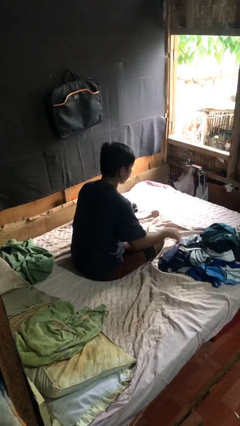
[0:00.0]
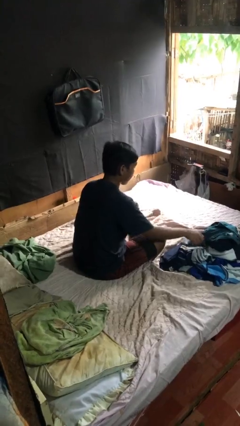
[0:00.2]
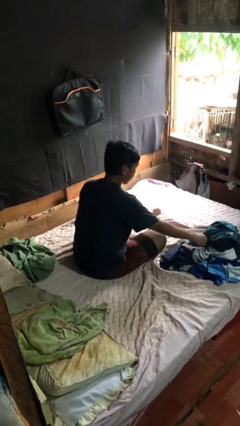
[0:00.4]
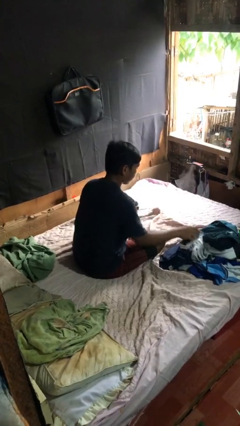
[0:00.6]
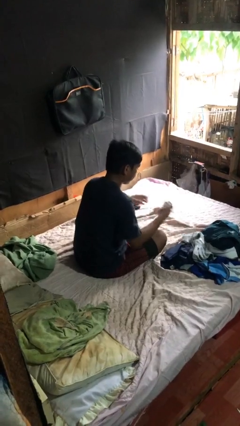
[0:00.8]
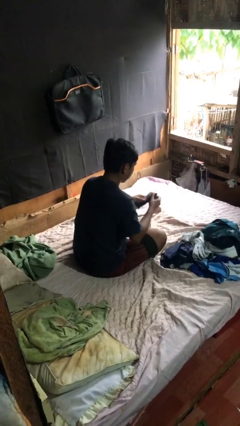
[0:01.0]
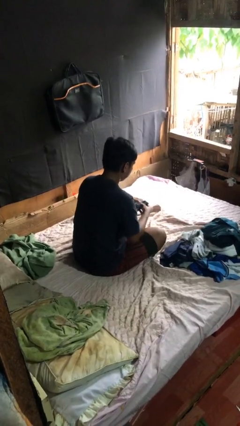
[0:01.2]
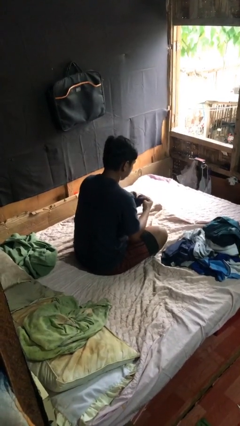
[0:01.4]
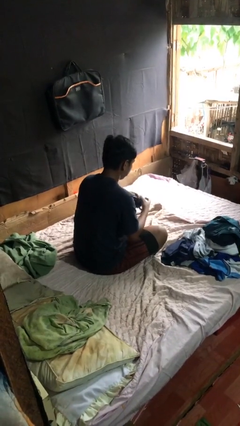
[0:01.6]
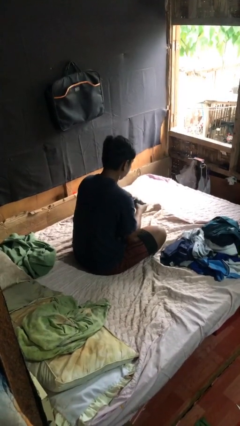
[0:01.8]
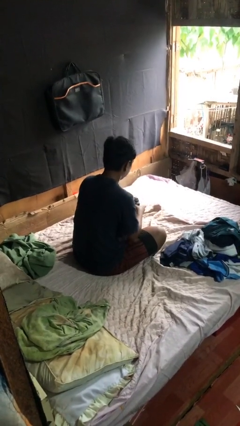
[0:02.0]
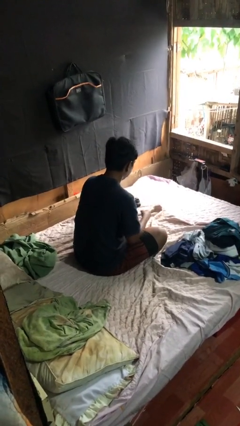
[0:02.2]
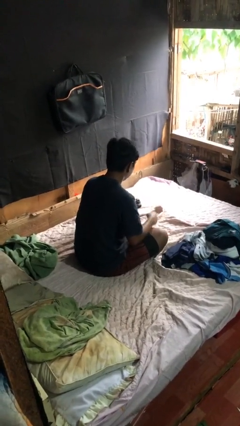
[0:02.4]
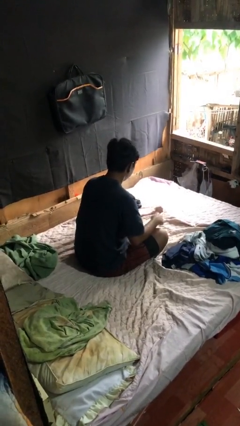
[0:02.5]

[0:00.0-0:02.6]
person folds socks

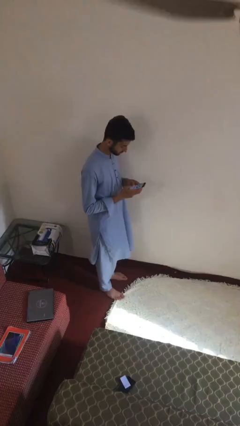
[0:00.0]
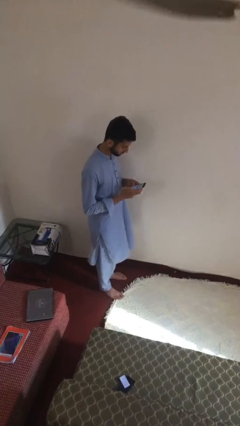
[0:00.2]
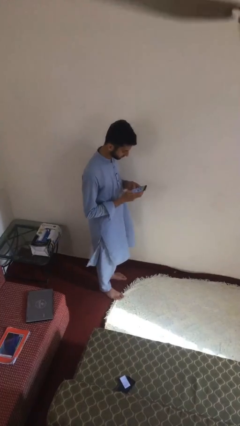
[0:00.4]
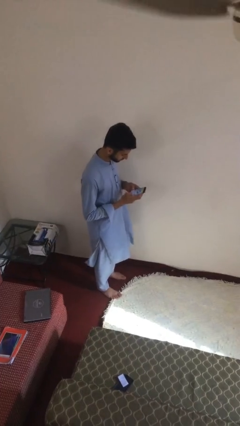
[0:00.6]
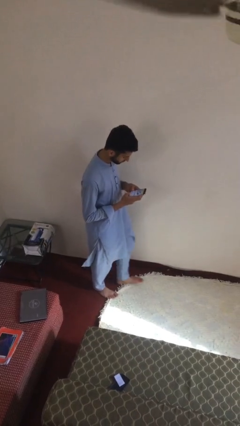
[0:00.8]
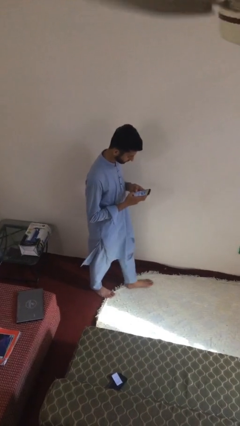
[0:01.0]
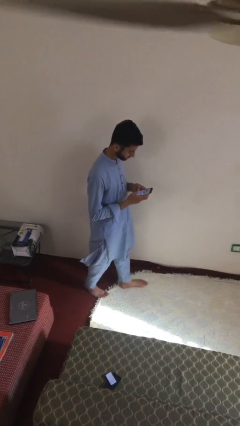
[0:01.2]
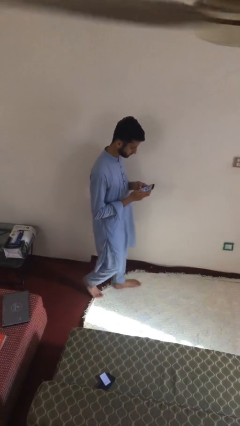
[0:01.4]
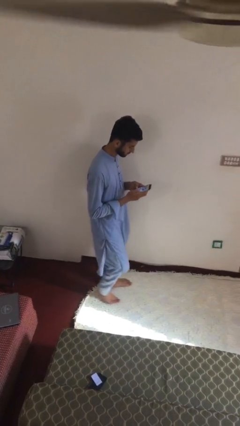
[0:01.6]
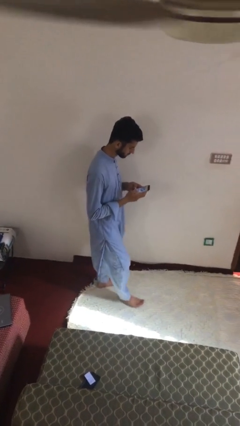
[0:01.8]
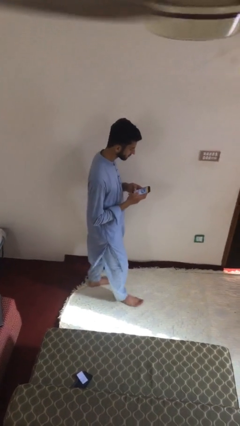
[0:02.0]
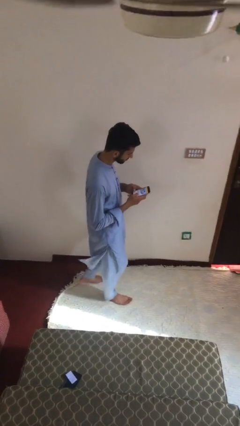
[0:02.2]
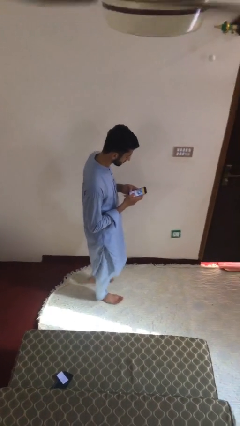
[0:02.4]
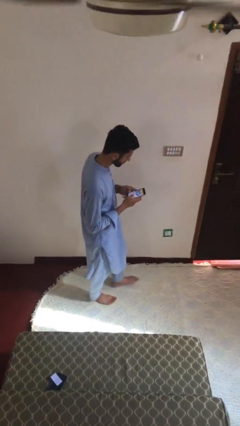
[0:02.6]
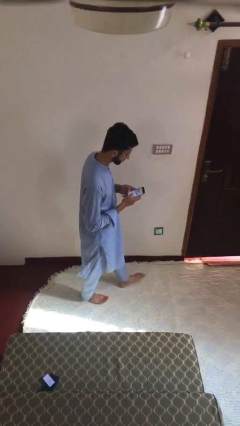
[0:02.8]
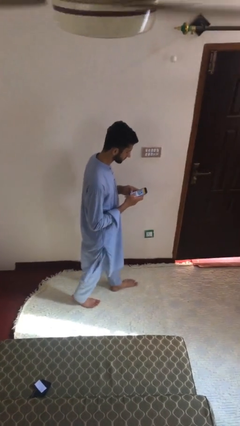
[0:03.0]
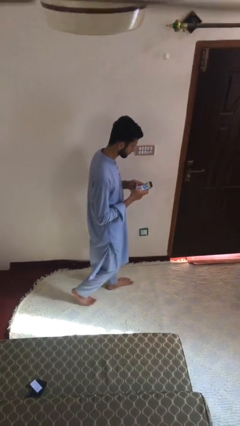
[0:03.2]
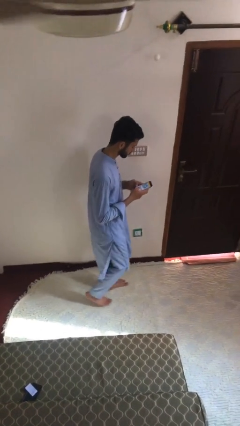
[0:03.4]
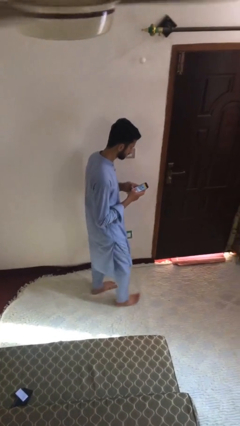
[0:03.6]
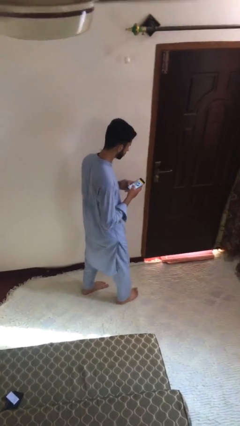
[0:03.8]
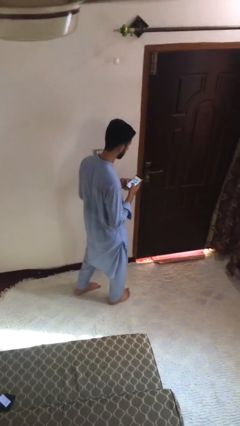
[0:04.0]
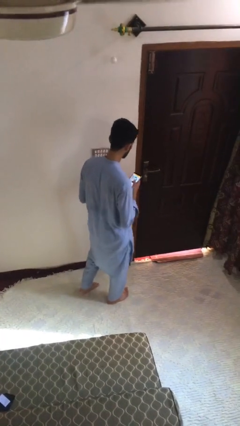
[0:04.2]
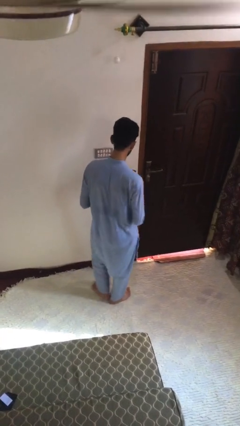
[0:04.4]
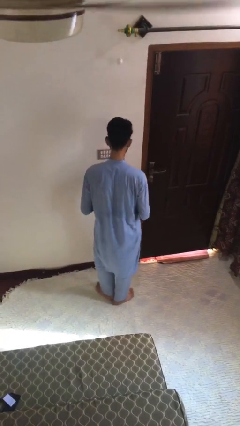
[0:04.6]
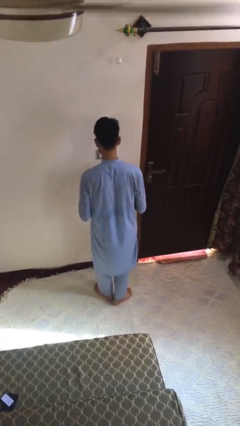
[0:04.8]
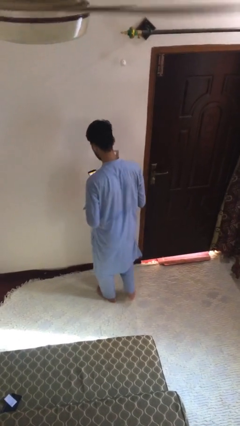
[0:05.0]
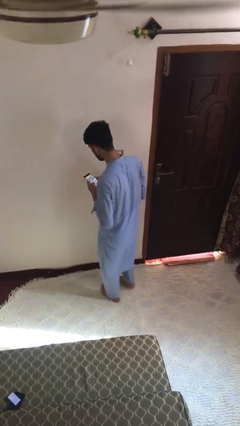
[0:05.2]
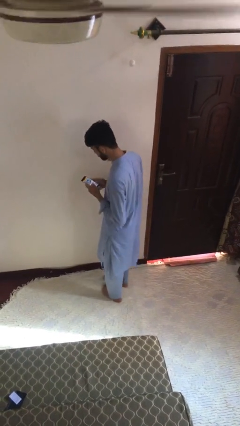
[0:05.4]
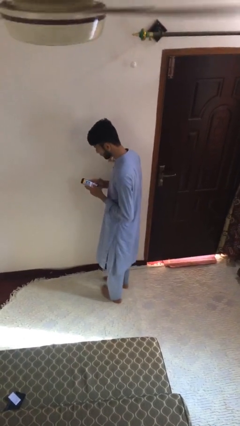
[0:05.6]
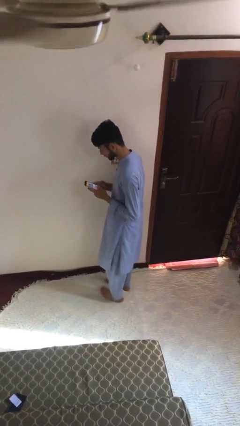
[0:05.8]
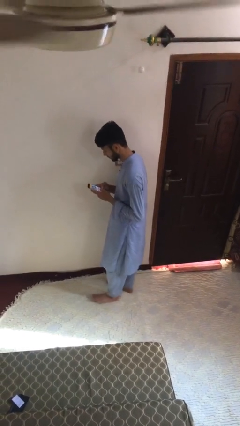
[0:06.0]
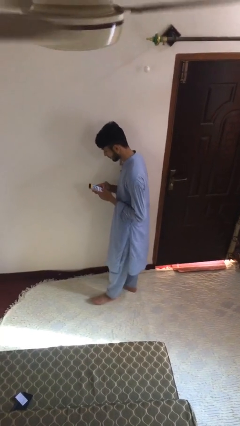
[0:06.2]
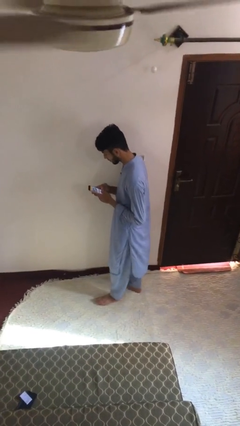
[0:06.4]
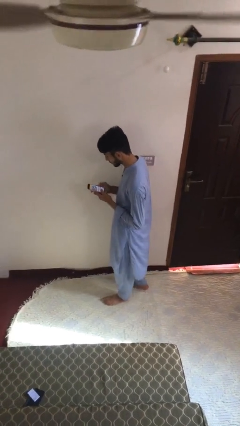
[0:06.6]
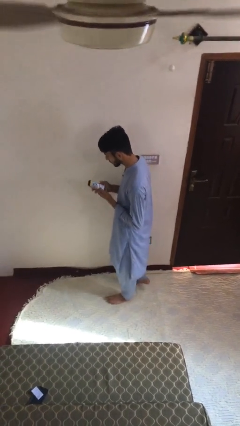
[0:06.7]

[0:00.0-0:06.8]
person texts on phone

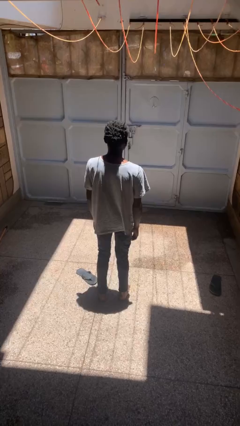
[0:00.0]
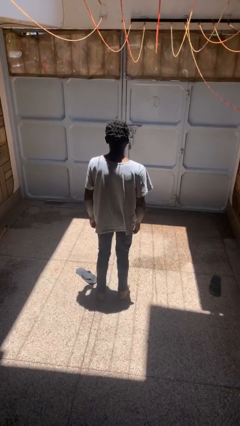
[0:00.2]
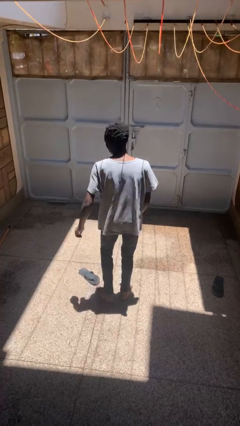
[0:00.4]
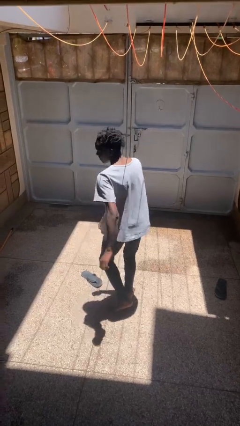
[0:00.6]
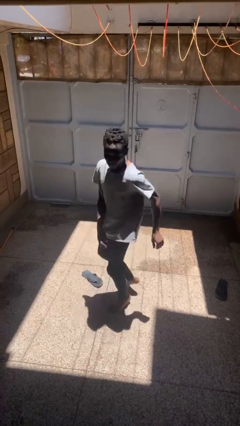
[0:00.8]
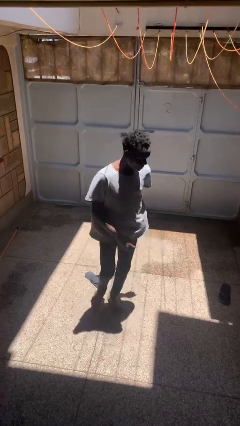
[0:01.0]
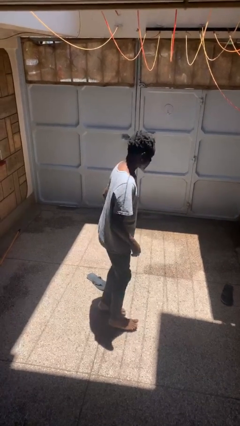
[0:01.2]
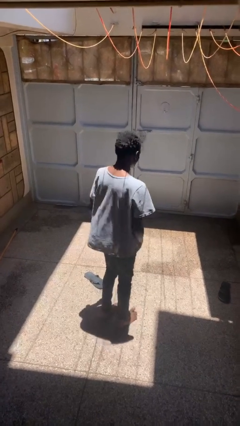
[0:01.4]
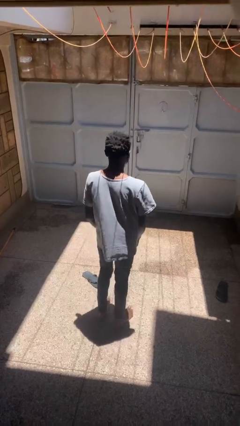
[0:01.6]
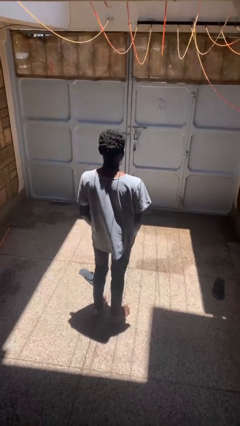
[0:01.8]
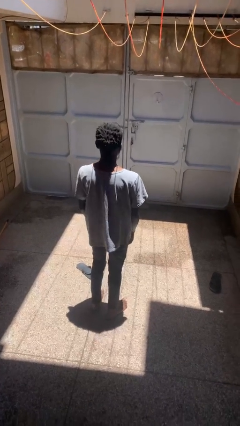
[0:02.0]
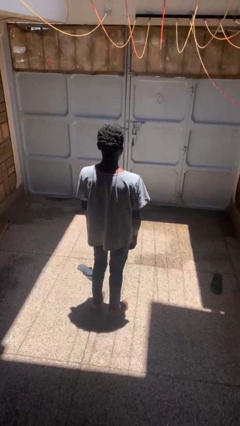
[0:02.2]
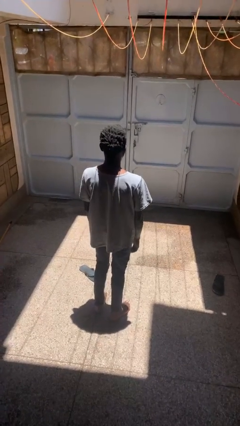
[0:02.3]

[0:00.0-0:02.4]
person twirls

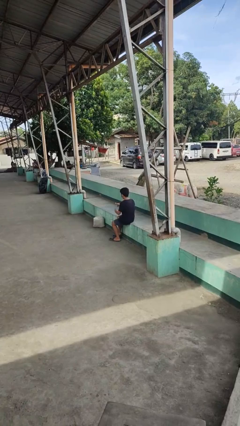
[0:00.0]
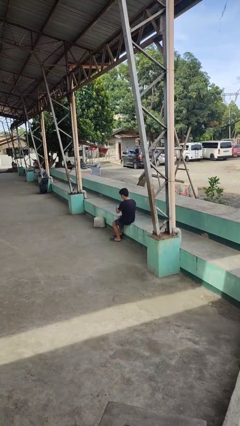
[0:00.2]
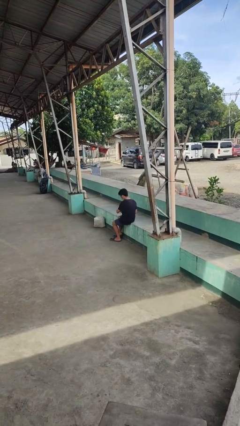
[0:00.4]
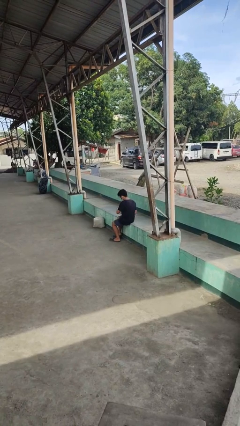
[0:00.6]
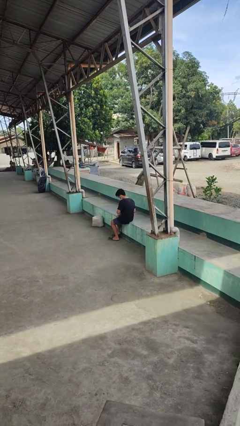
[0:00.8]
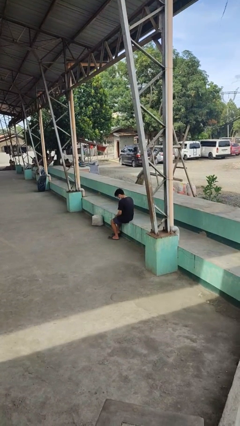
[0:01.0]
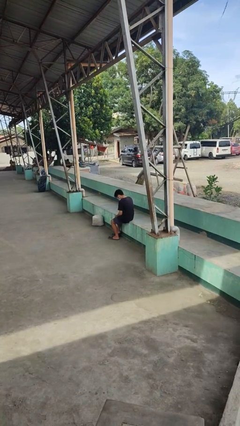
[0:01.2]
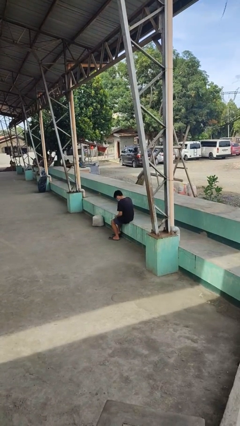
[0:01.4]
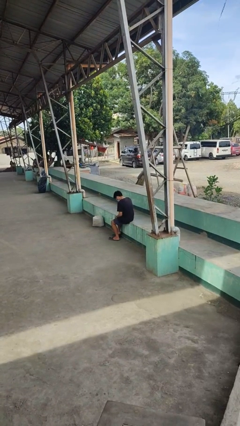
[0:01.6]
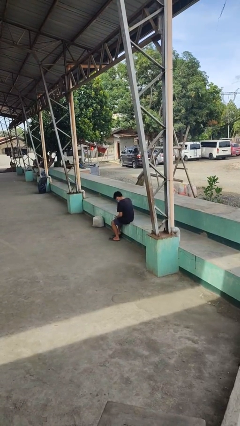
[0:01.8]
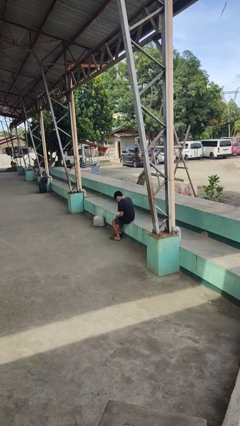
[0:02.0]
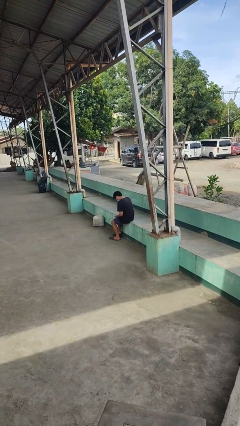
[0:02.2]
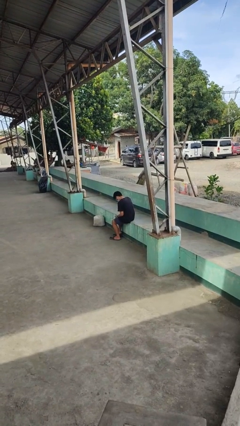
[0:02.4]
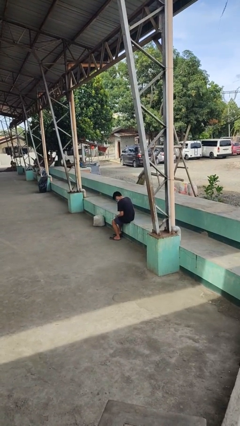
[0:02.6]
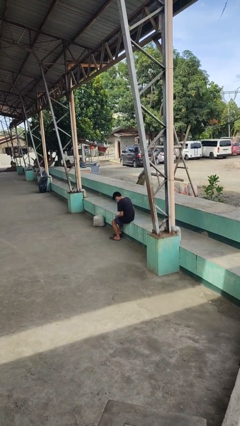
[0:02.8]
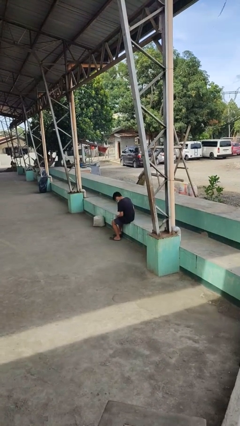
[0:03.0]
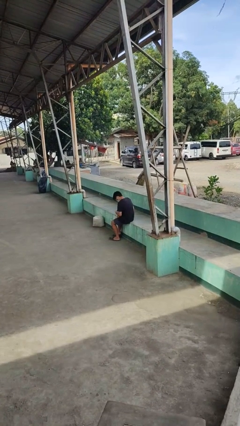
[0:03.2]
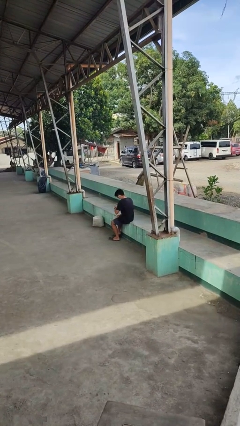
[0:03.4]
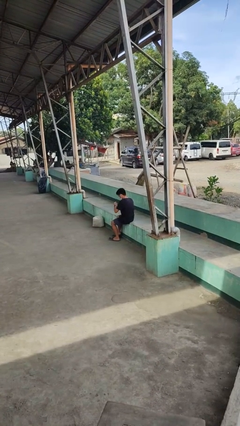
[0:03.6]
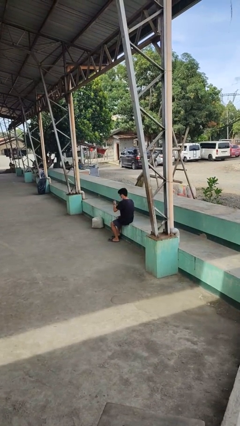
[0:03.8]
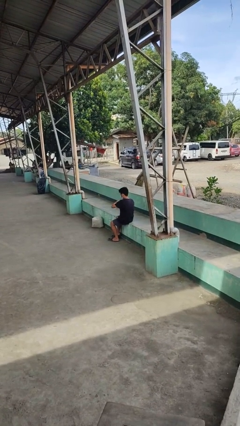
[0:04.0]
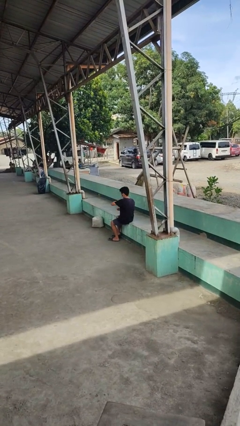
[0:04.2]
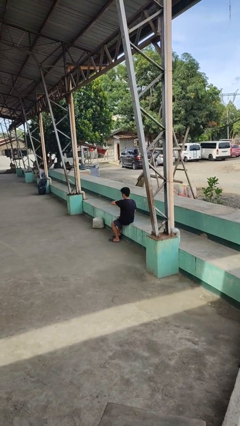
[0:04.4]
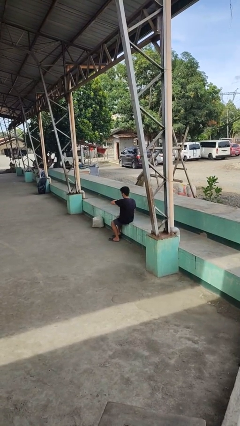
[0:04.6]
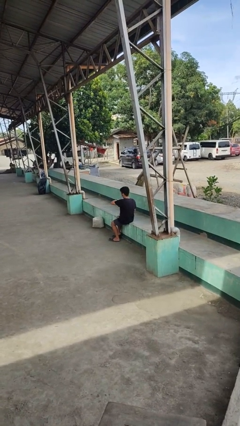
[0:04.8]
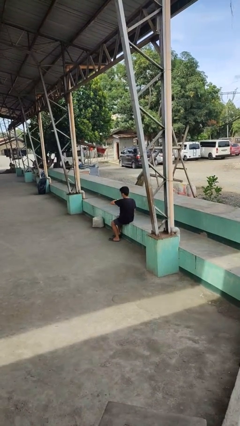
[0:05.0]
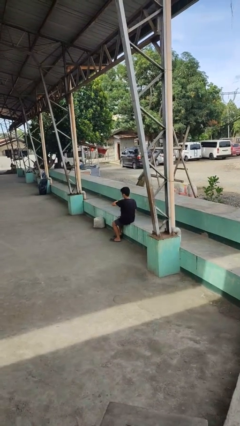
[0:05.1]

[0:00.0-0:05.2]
person puts on wristwatch

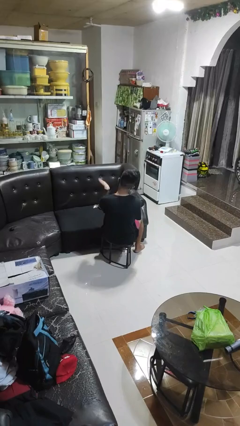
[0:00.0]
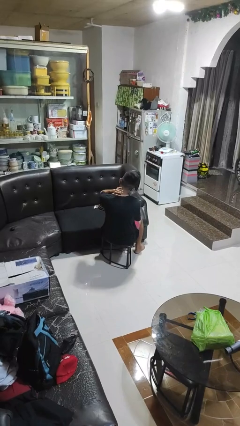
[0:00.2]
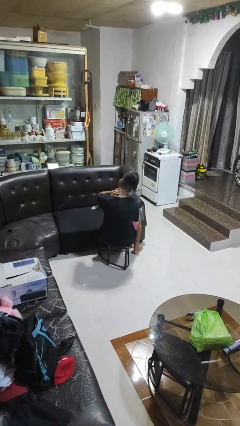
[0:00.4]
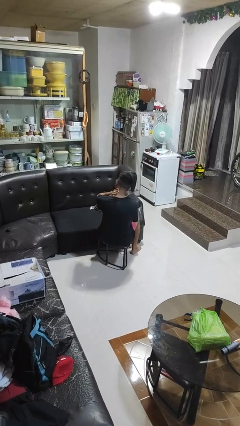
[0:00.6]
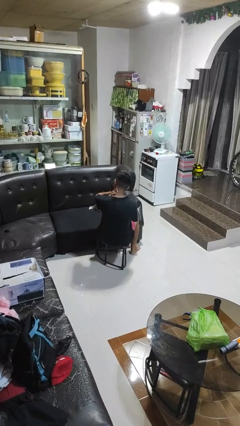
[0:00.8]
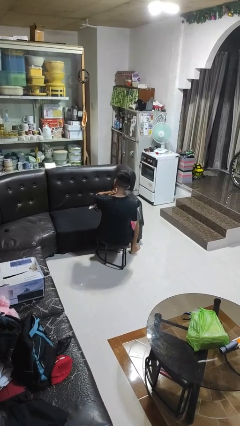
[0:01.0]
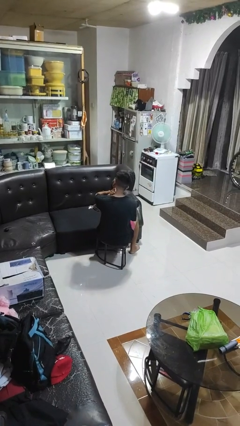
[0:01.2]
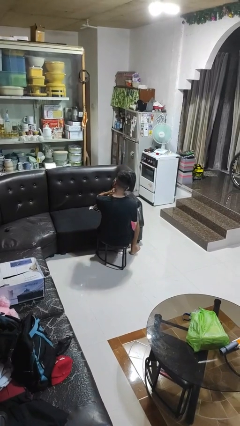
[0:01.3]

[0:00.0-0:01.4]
person swats bug
